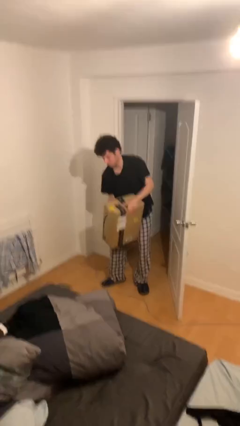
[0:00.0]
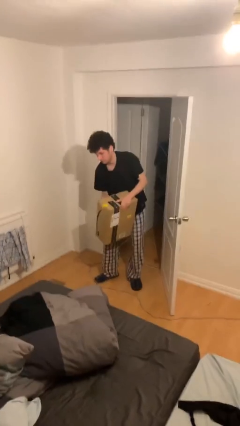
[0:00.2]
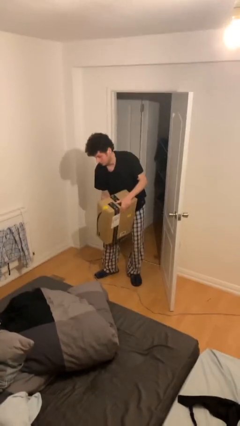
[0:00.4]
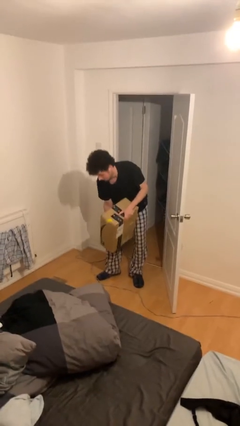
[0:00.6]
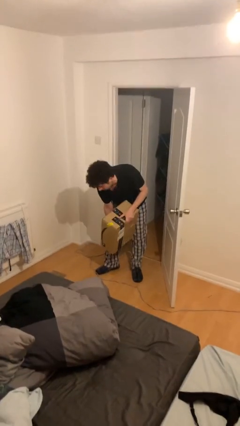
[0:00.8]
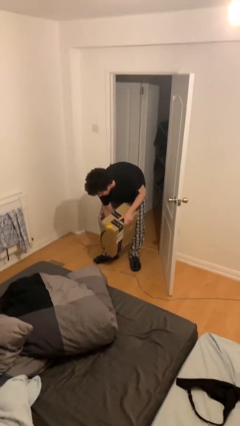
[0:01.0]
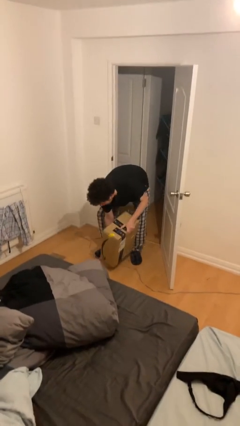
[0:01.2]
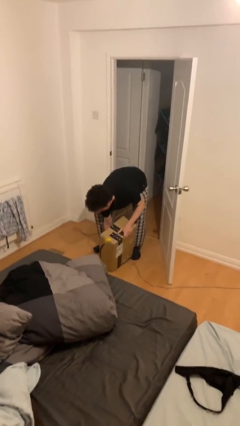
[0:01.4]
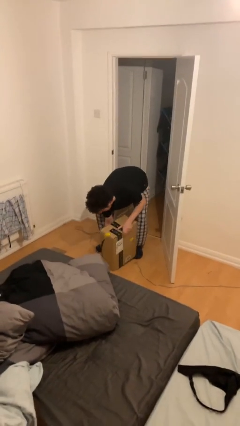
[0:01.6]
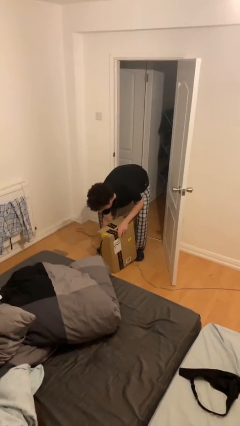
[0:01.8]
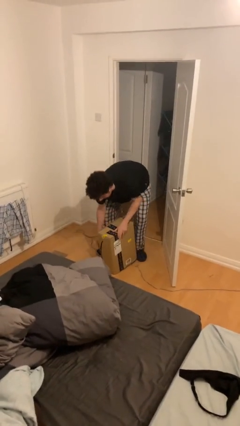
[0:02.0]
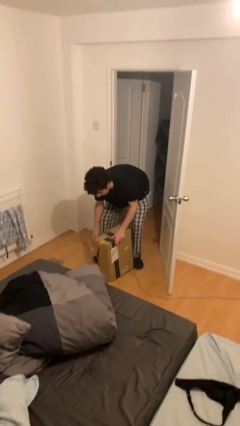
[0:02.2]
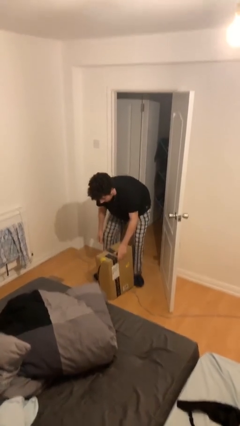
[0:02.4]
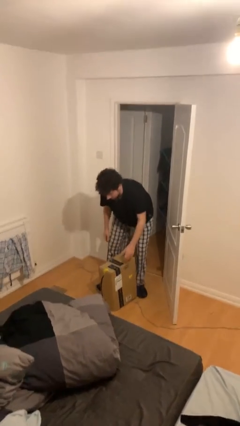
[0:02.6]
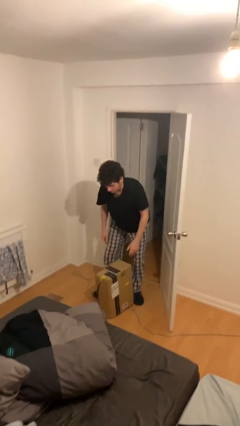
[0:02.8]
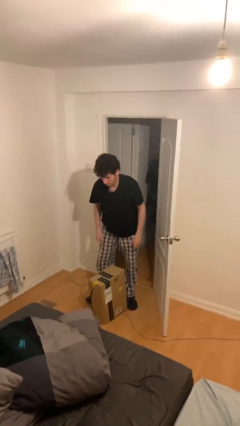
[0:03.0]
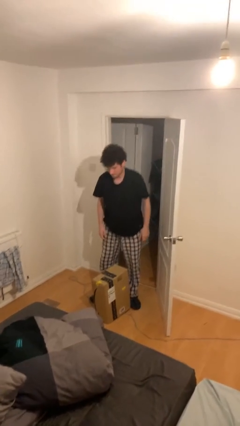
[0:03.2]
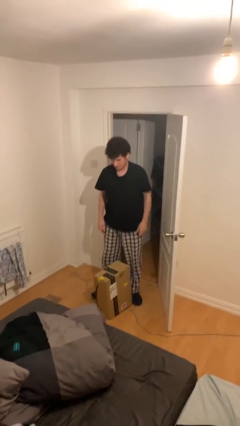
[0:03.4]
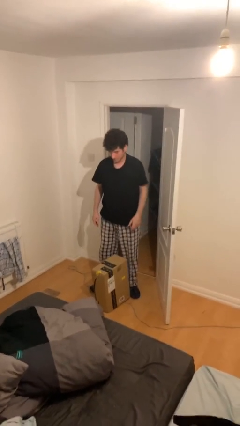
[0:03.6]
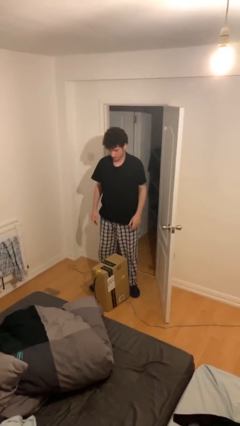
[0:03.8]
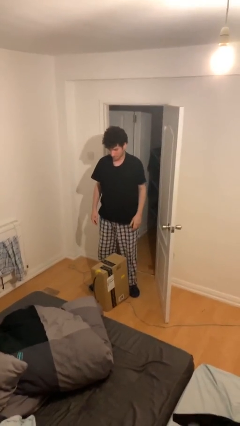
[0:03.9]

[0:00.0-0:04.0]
person puts down object on floor

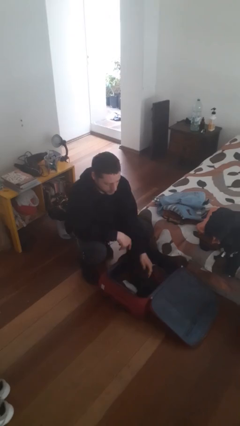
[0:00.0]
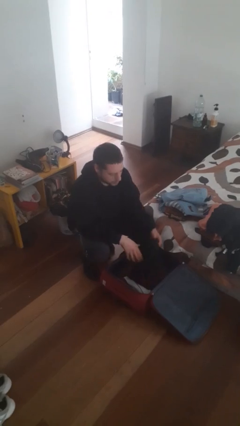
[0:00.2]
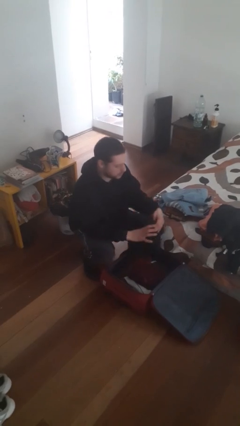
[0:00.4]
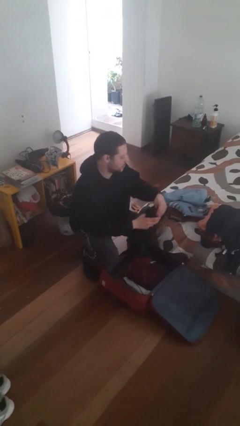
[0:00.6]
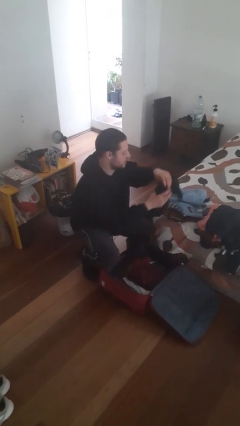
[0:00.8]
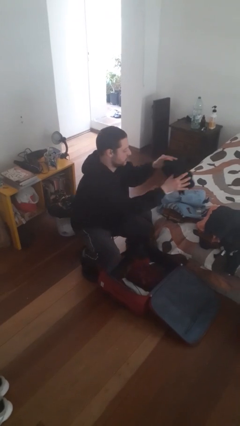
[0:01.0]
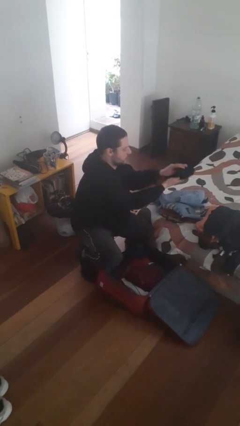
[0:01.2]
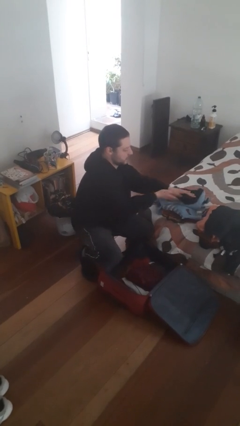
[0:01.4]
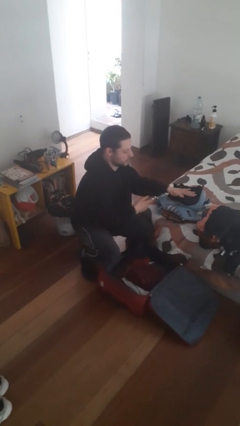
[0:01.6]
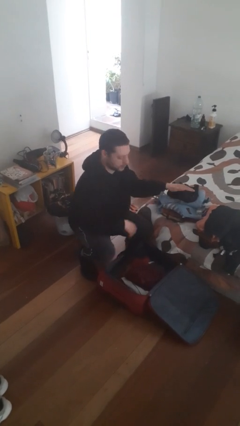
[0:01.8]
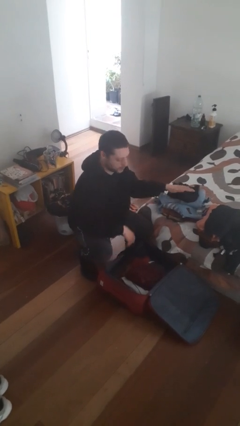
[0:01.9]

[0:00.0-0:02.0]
person unloads clothes from suitcase

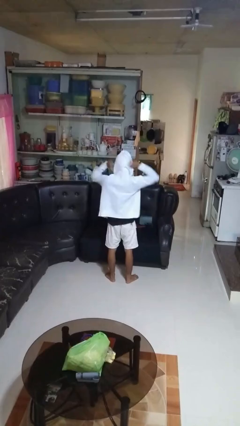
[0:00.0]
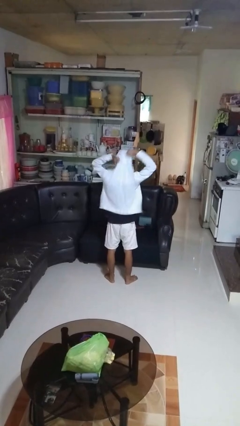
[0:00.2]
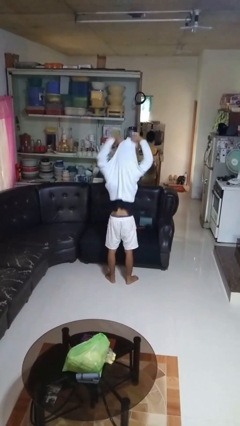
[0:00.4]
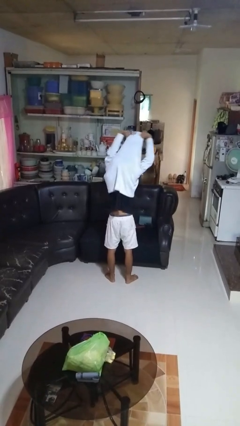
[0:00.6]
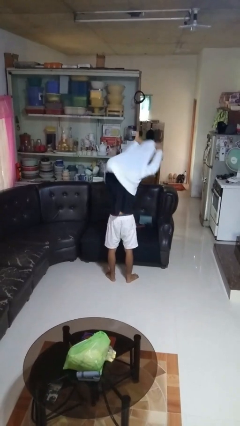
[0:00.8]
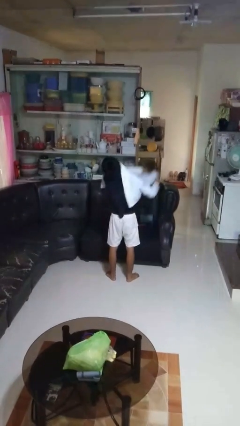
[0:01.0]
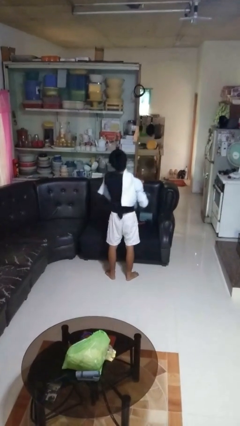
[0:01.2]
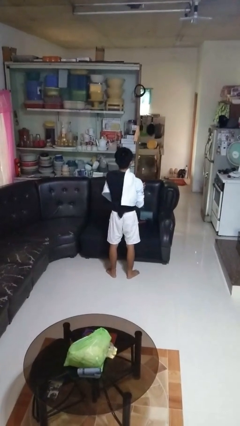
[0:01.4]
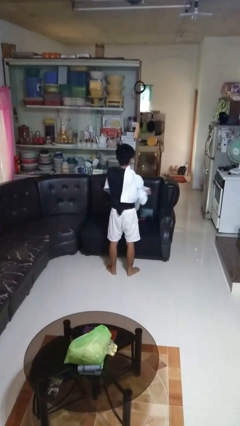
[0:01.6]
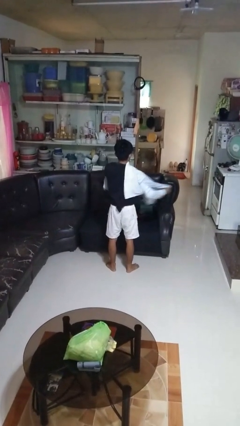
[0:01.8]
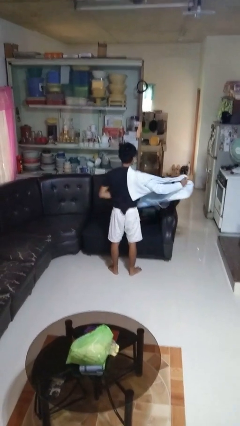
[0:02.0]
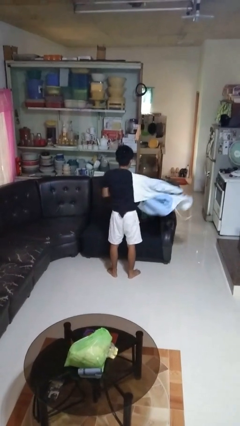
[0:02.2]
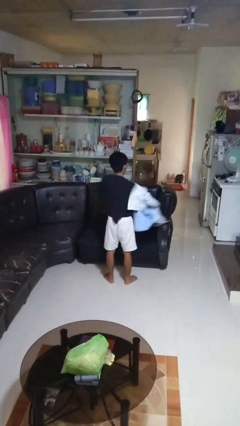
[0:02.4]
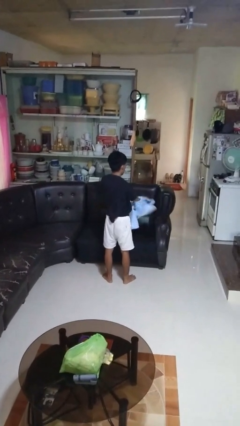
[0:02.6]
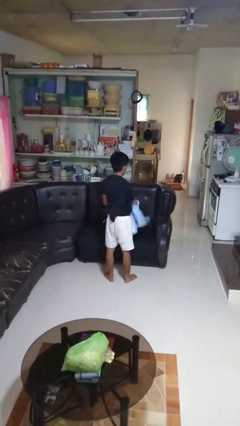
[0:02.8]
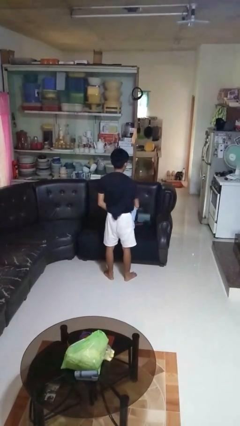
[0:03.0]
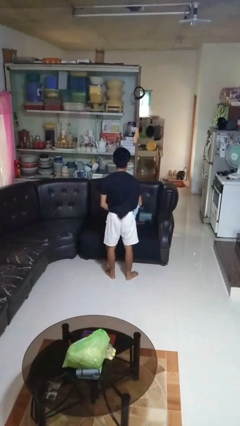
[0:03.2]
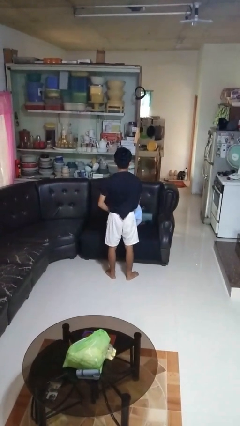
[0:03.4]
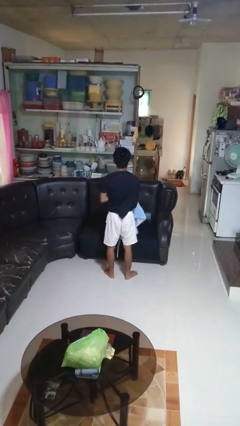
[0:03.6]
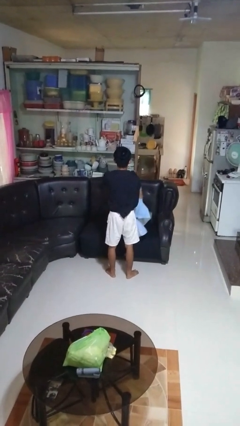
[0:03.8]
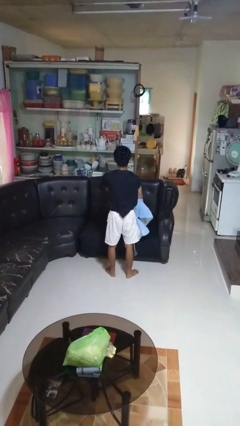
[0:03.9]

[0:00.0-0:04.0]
person takes off hoodie

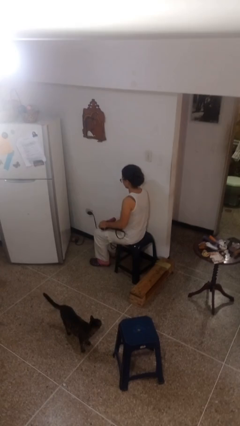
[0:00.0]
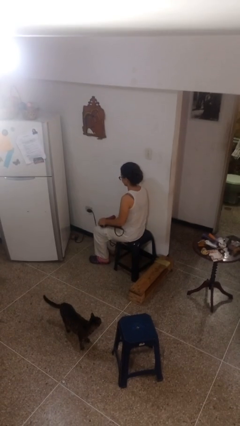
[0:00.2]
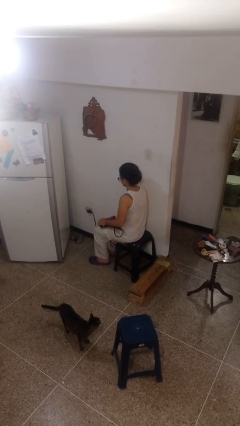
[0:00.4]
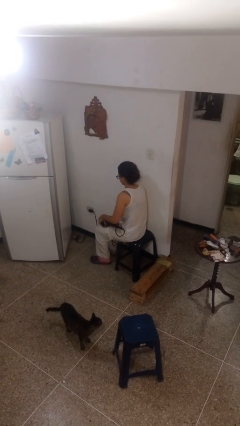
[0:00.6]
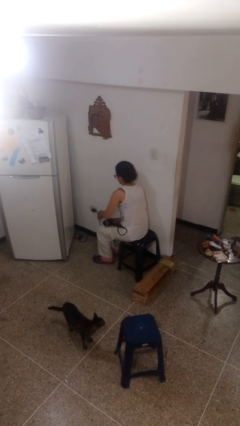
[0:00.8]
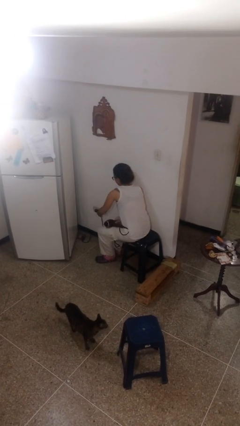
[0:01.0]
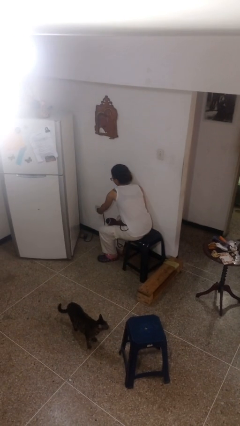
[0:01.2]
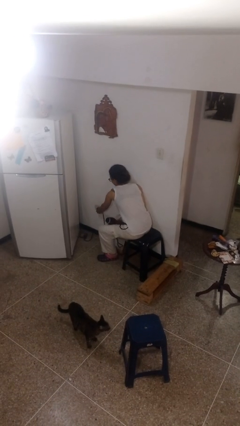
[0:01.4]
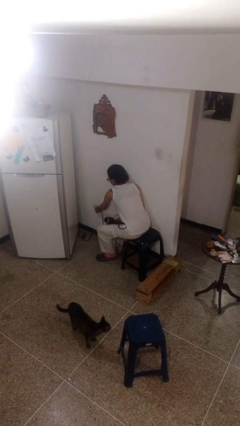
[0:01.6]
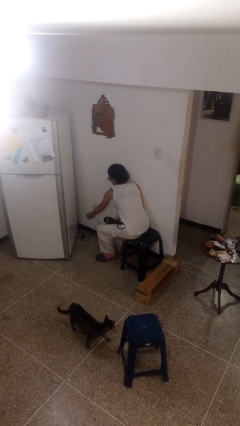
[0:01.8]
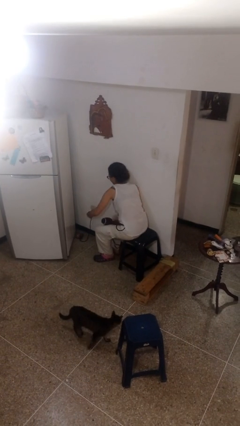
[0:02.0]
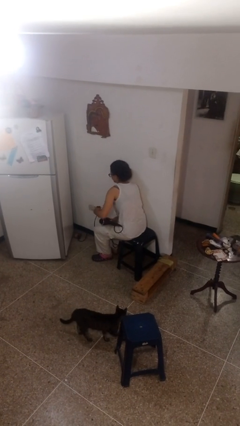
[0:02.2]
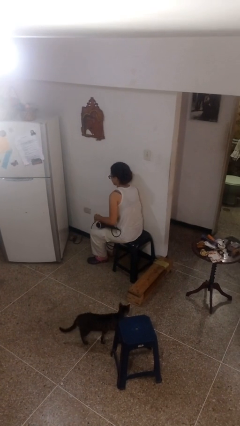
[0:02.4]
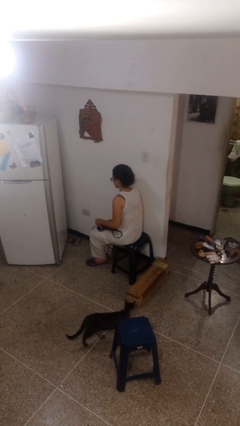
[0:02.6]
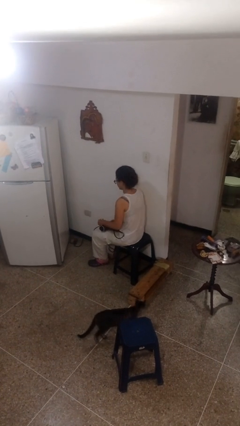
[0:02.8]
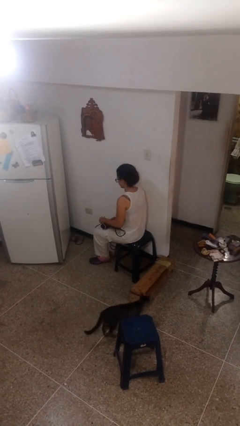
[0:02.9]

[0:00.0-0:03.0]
person unplugs from electrical socket

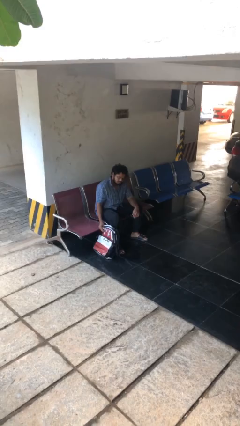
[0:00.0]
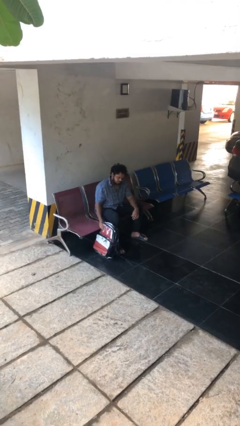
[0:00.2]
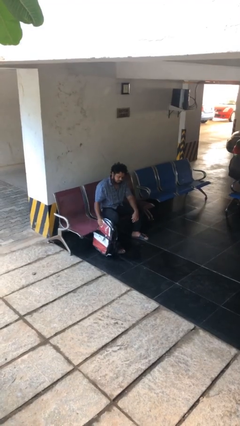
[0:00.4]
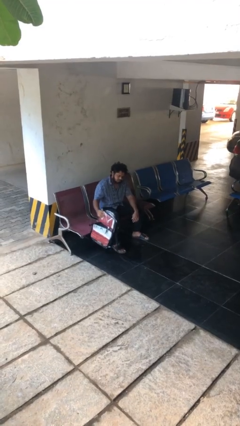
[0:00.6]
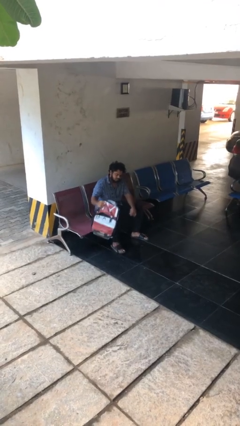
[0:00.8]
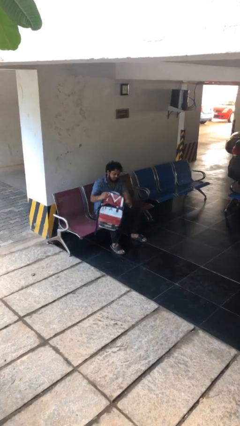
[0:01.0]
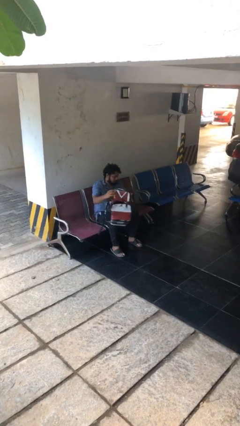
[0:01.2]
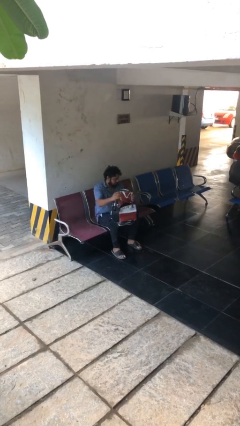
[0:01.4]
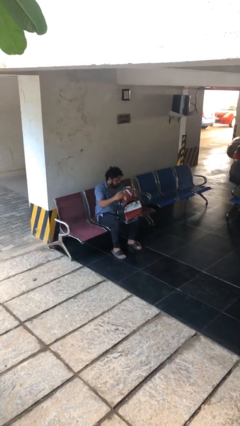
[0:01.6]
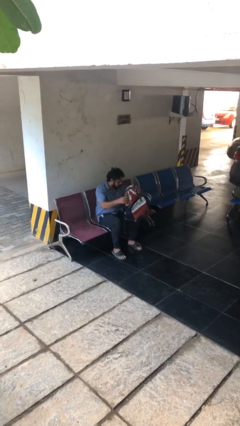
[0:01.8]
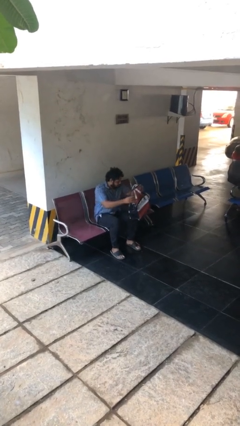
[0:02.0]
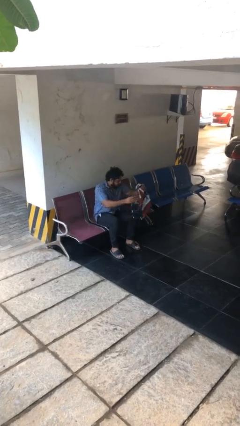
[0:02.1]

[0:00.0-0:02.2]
person picks up object from floor

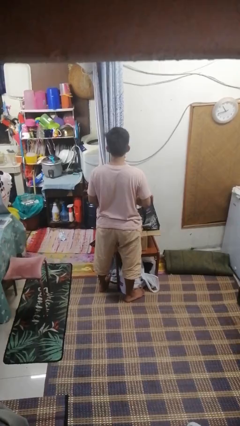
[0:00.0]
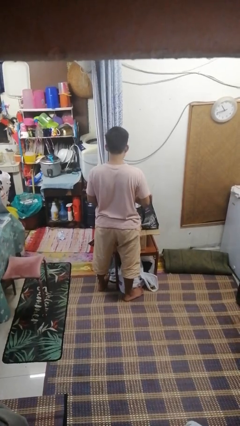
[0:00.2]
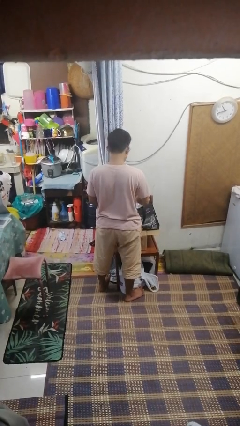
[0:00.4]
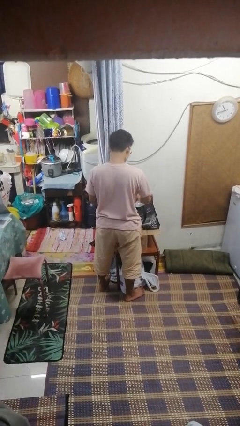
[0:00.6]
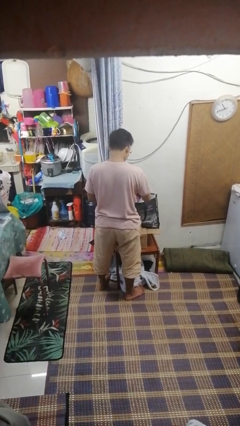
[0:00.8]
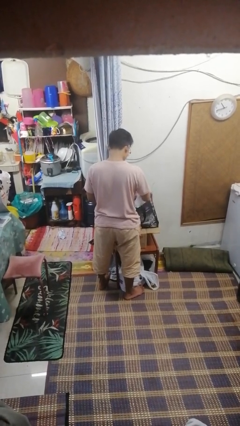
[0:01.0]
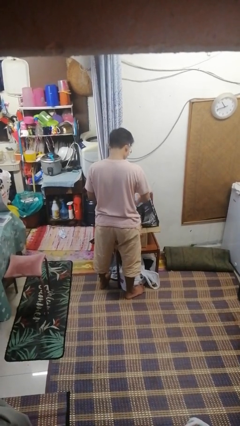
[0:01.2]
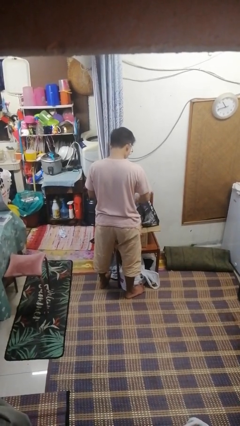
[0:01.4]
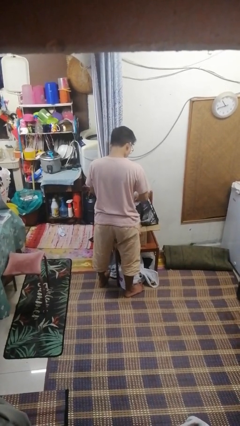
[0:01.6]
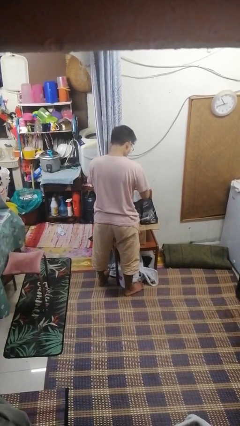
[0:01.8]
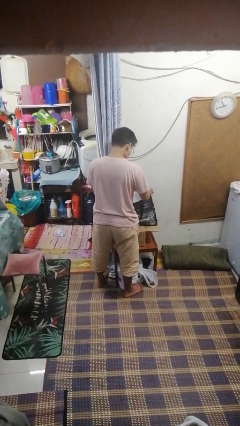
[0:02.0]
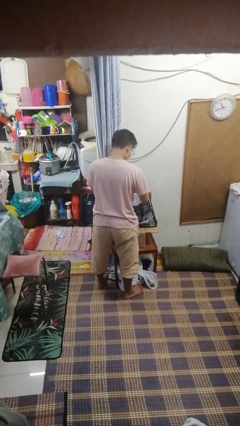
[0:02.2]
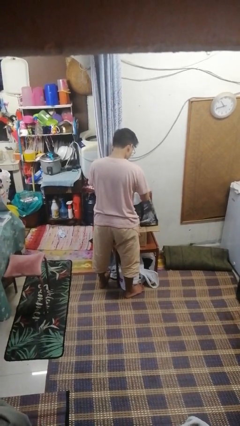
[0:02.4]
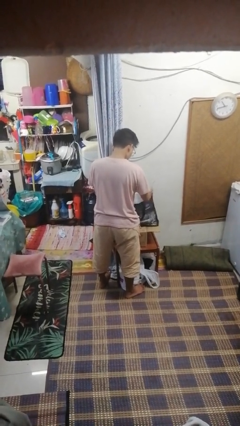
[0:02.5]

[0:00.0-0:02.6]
person searches in bag
